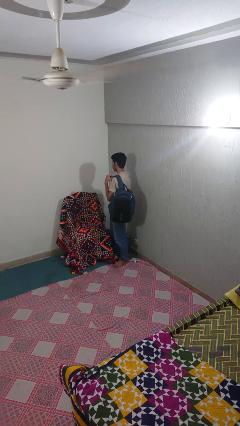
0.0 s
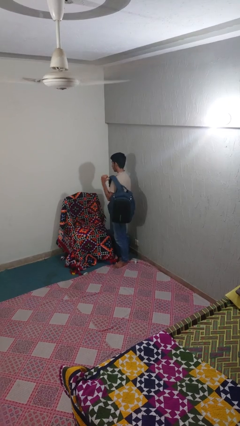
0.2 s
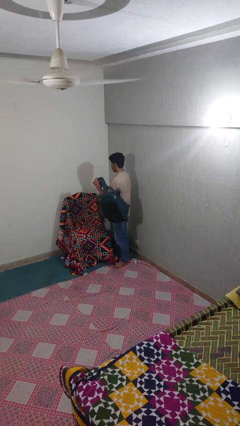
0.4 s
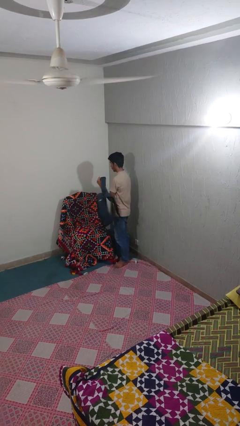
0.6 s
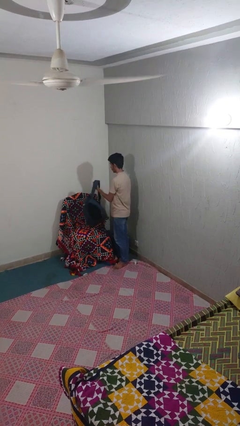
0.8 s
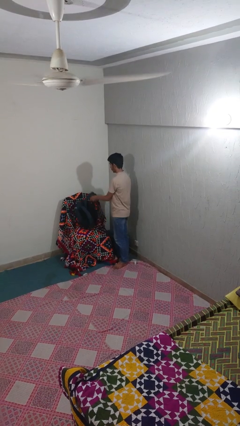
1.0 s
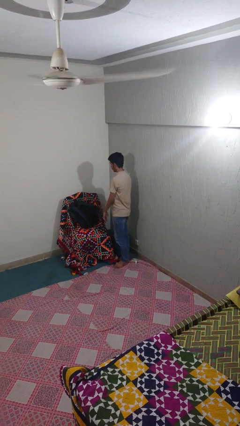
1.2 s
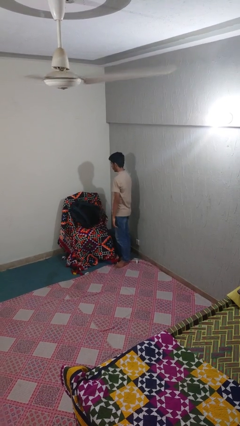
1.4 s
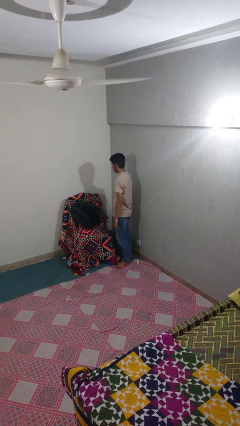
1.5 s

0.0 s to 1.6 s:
person puts down object on couch

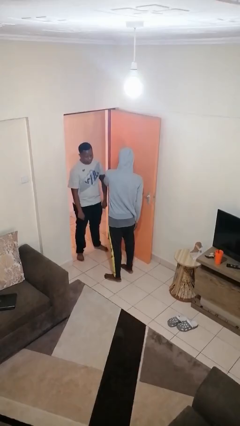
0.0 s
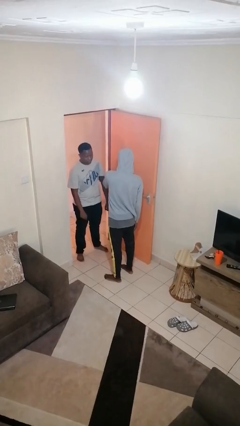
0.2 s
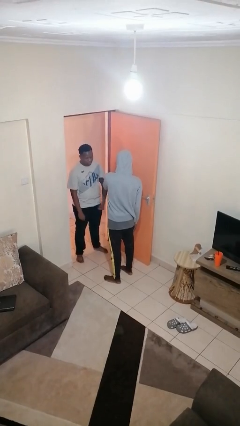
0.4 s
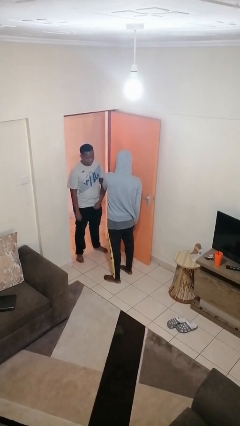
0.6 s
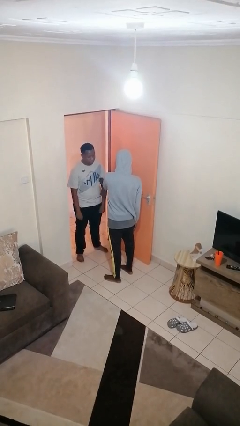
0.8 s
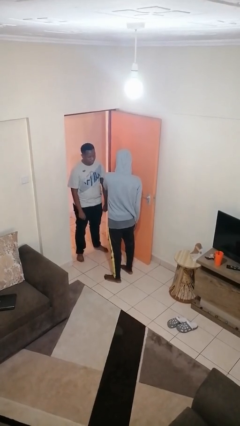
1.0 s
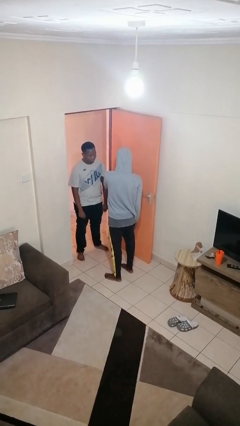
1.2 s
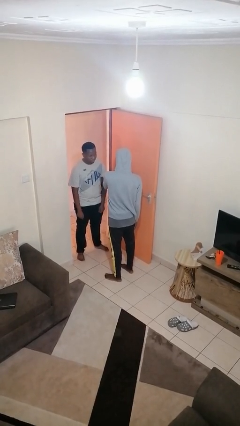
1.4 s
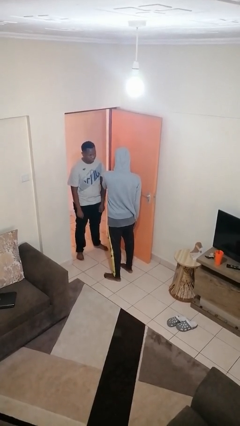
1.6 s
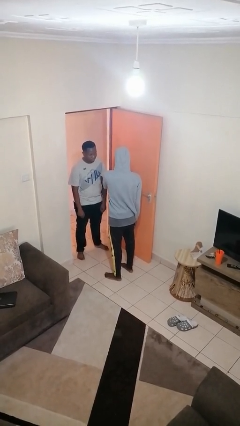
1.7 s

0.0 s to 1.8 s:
person grabs person by bicep

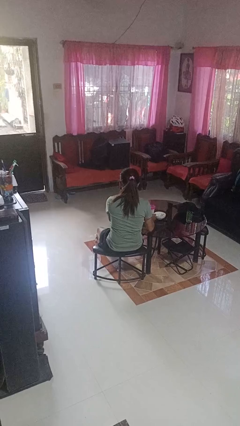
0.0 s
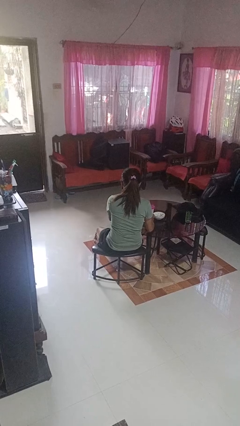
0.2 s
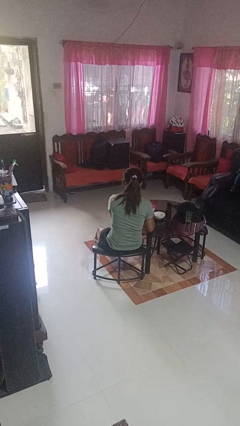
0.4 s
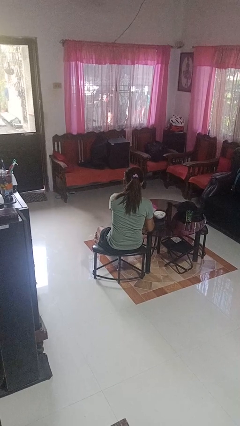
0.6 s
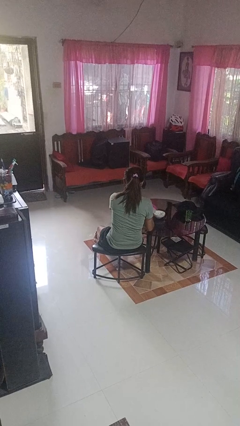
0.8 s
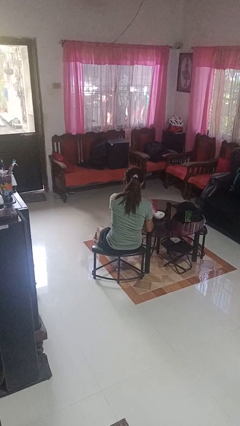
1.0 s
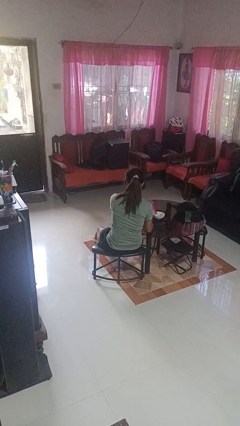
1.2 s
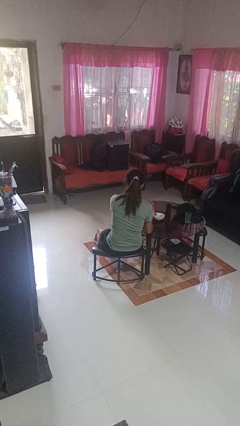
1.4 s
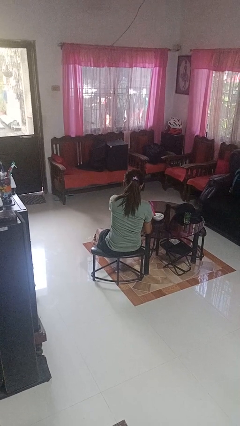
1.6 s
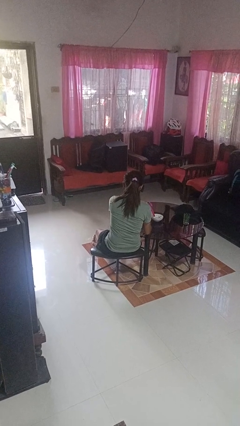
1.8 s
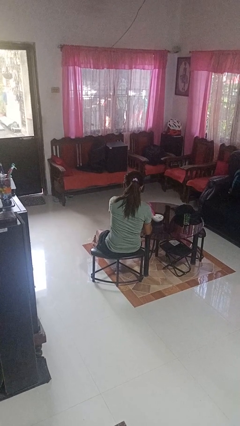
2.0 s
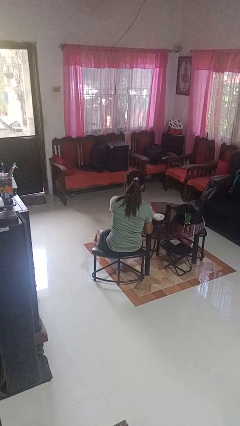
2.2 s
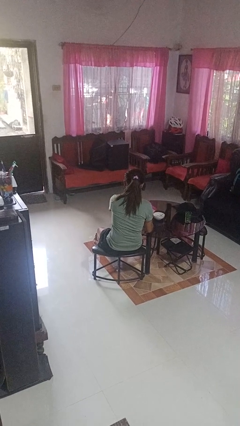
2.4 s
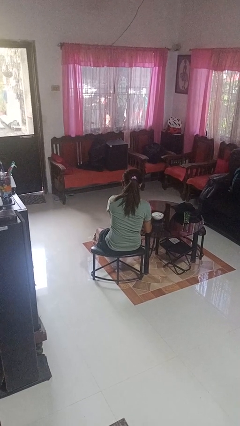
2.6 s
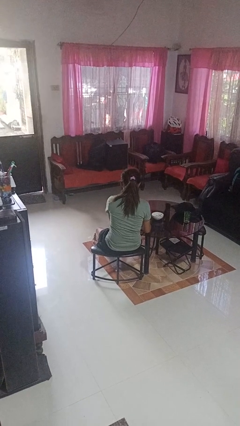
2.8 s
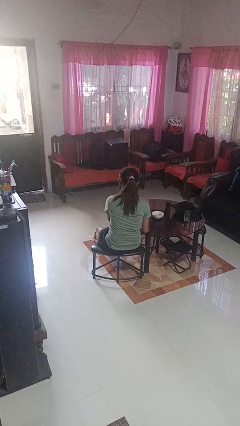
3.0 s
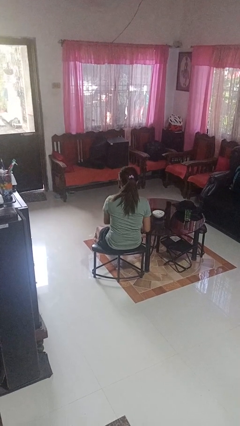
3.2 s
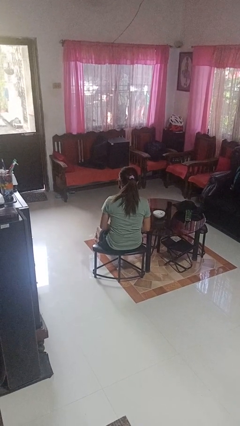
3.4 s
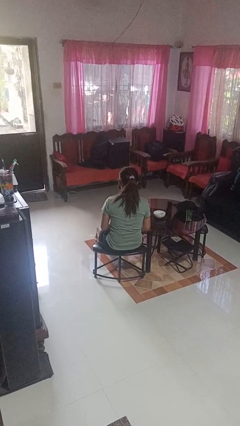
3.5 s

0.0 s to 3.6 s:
person pours into bowl

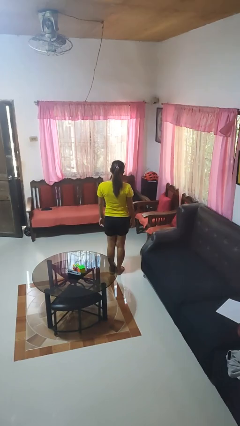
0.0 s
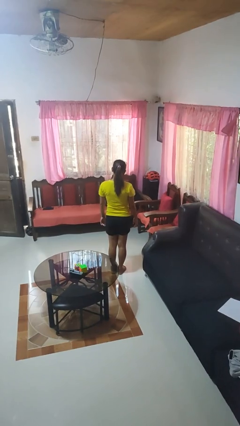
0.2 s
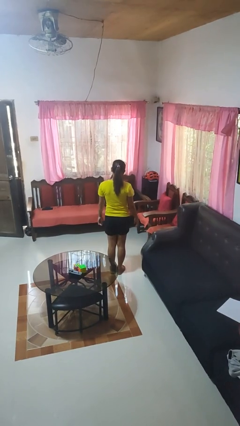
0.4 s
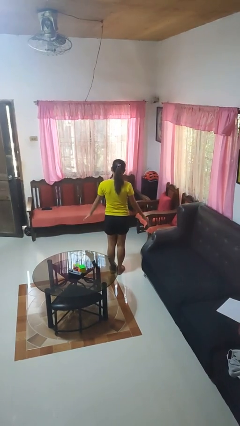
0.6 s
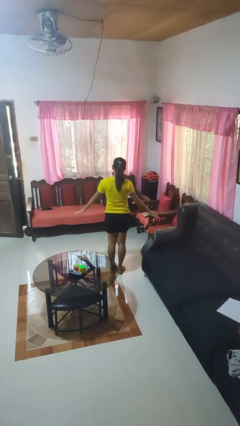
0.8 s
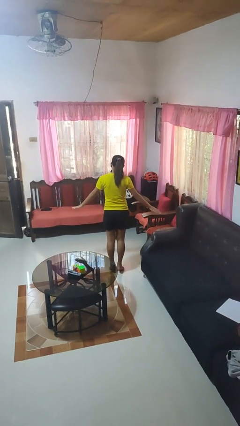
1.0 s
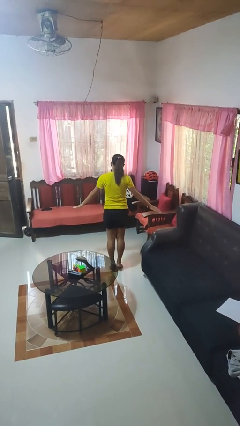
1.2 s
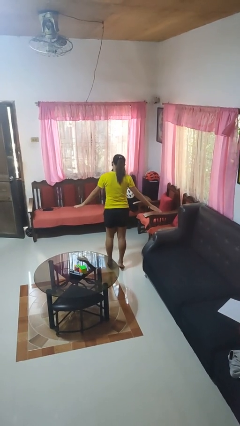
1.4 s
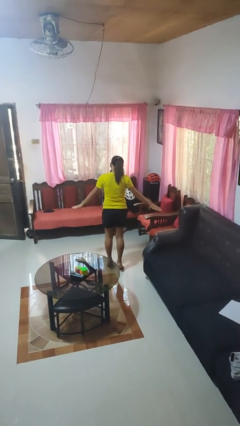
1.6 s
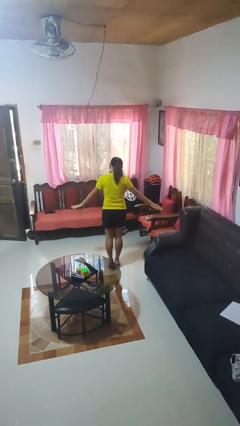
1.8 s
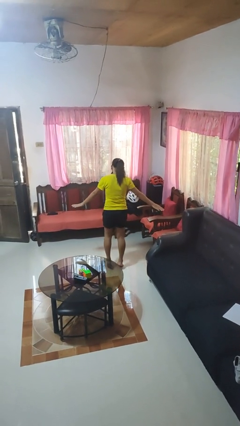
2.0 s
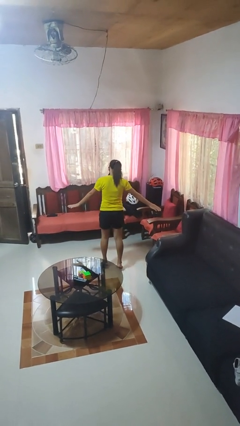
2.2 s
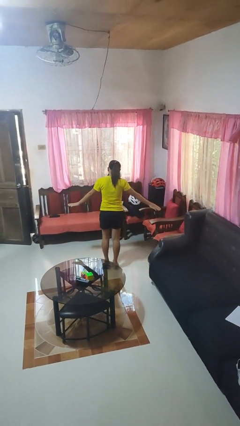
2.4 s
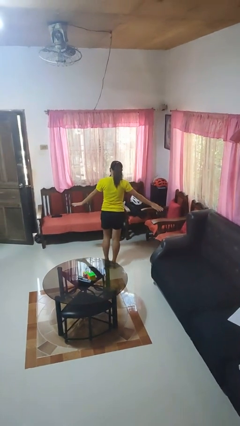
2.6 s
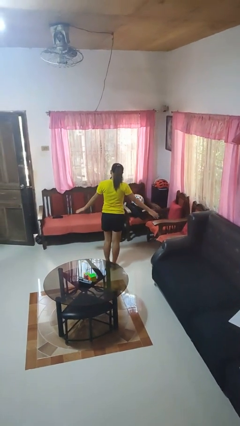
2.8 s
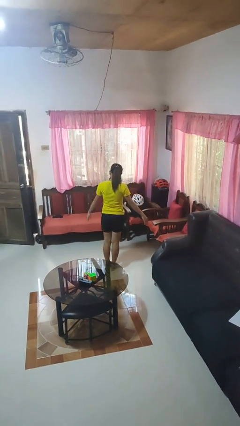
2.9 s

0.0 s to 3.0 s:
person walks tiptoe

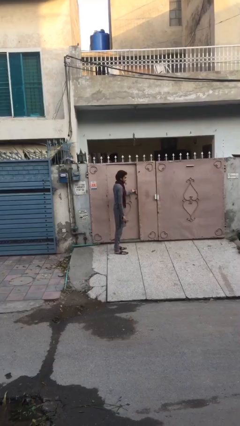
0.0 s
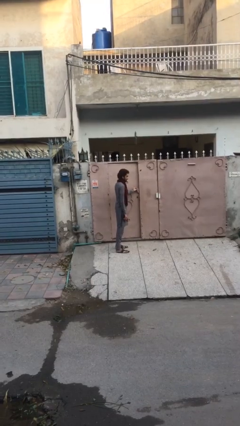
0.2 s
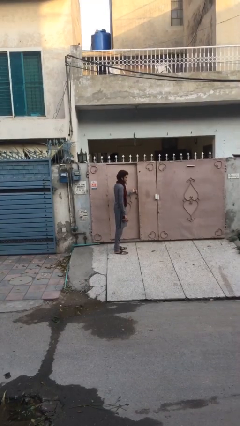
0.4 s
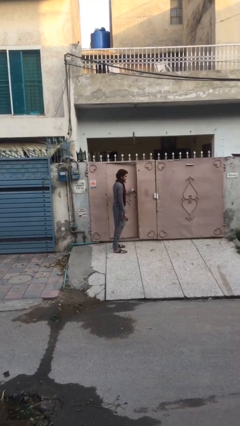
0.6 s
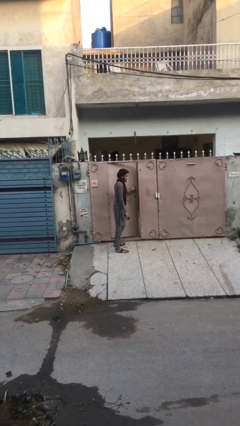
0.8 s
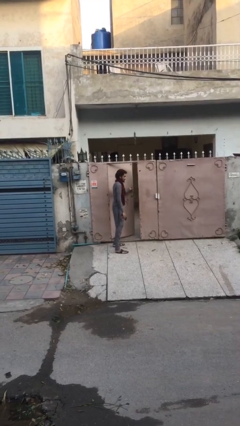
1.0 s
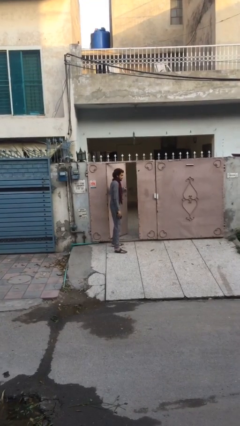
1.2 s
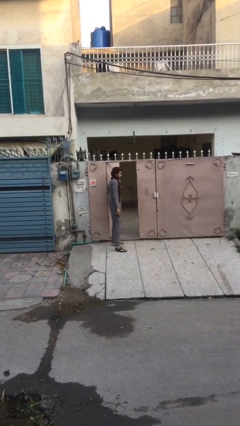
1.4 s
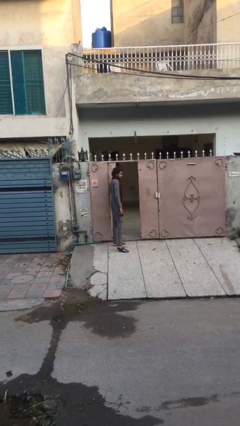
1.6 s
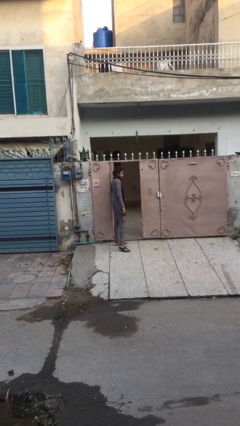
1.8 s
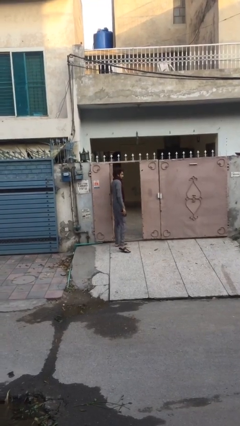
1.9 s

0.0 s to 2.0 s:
person opens facility door

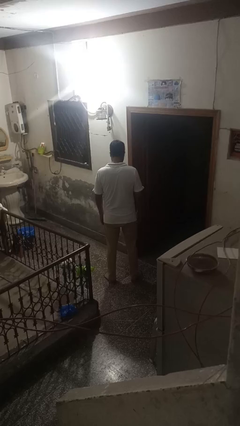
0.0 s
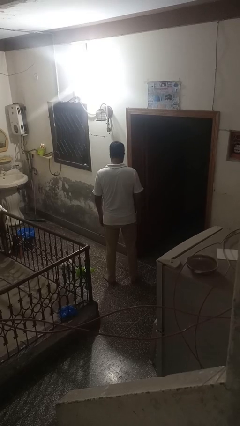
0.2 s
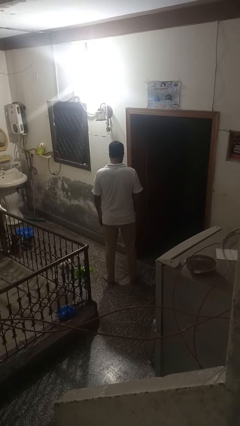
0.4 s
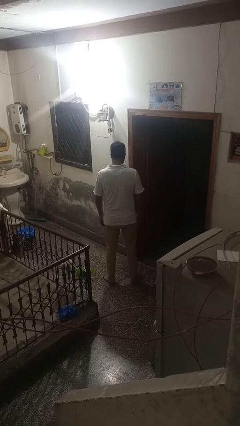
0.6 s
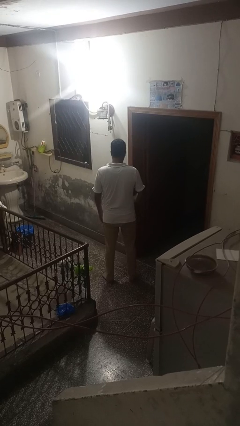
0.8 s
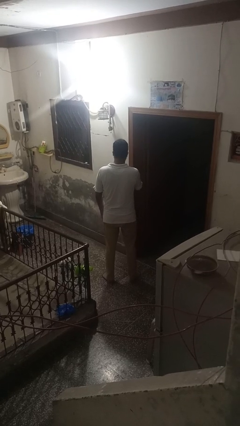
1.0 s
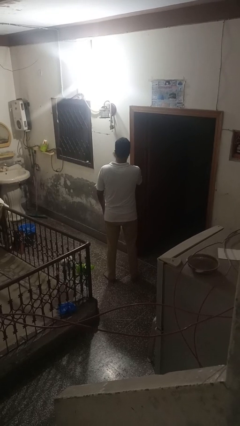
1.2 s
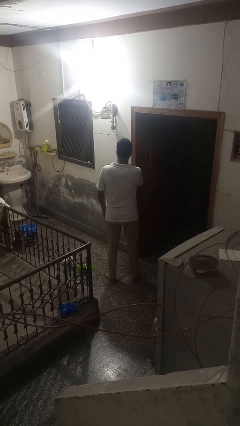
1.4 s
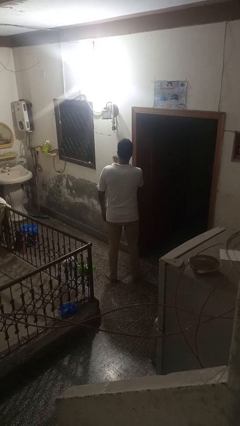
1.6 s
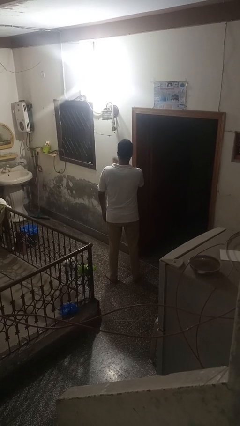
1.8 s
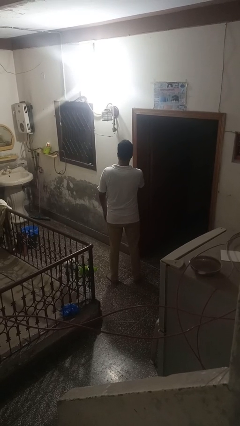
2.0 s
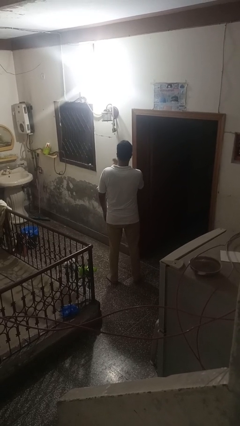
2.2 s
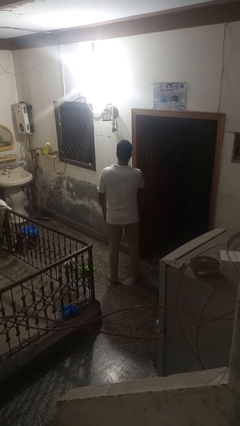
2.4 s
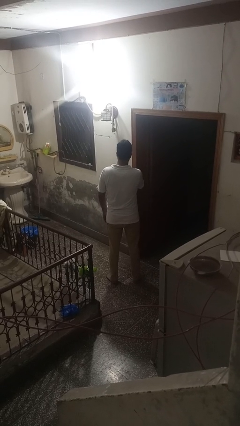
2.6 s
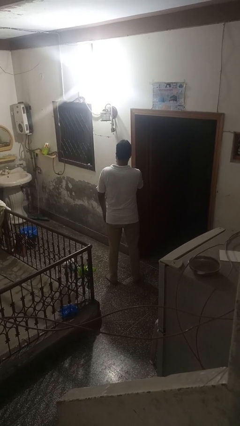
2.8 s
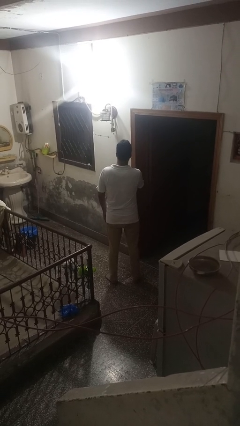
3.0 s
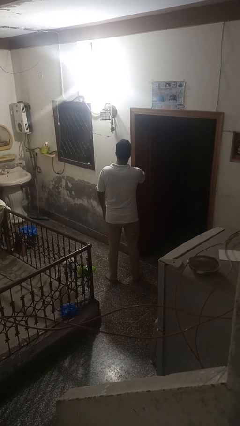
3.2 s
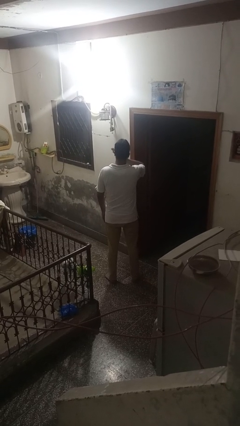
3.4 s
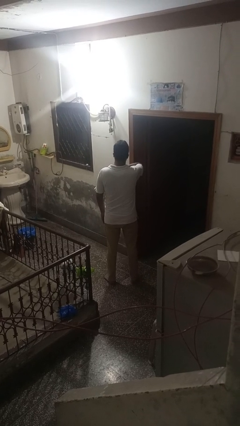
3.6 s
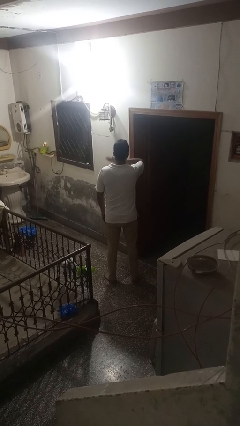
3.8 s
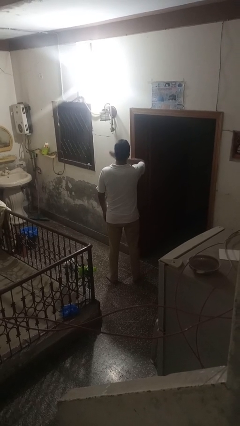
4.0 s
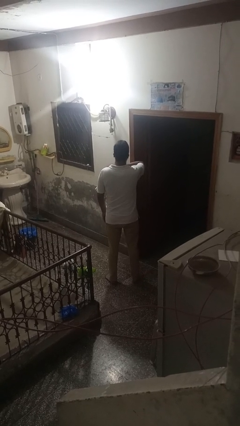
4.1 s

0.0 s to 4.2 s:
person drums on chest

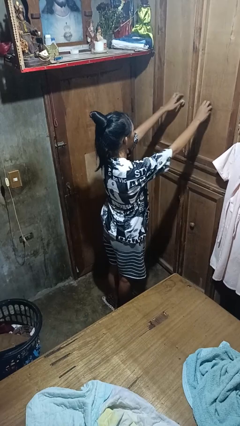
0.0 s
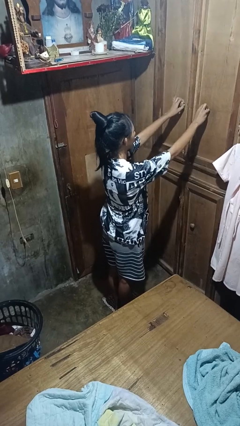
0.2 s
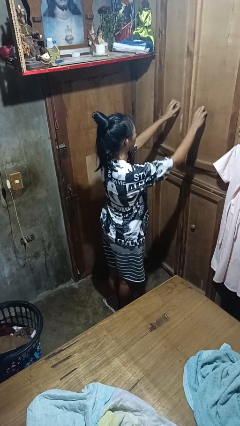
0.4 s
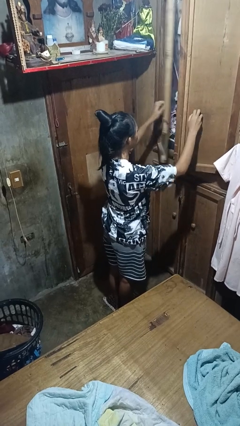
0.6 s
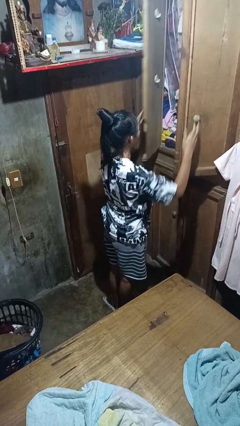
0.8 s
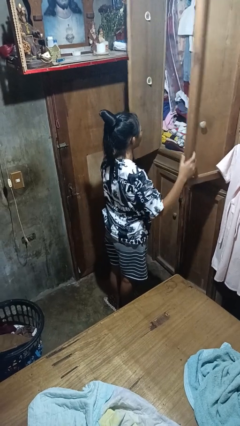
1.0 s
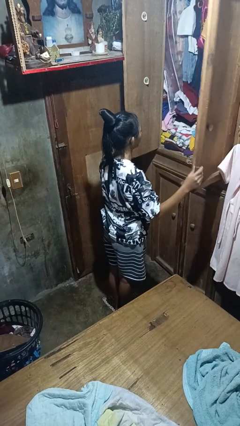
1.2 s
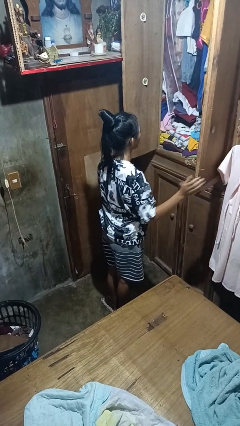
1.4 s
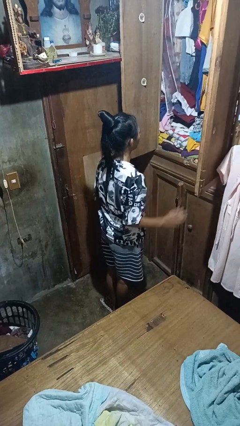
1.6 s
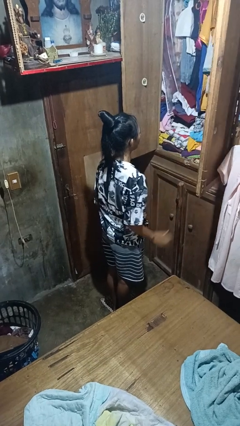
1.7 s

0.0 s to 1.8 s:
person opens closet door
